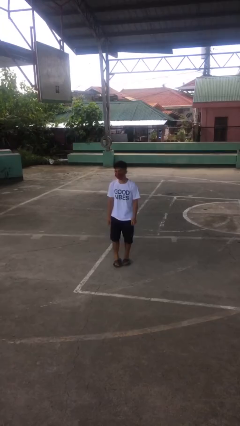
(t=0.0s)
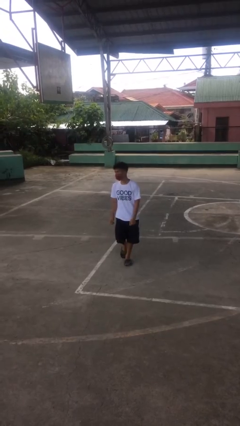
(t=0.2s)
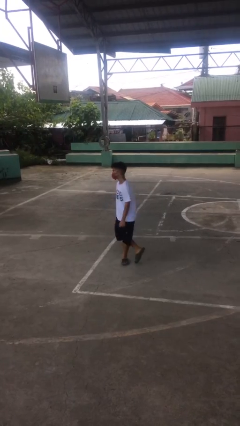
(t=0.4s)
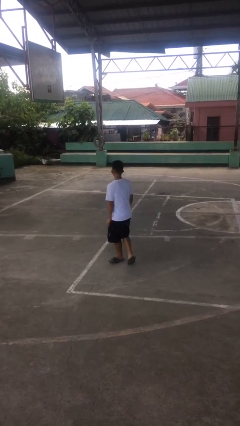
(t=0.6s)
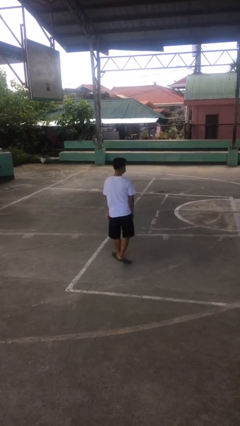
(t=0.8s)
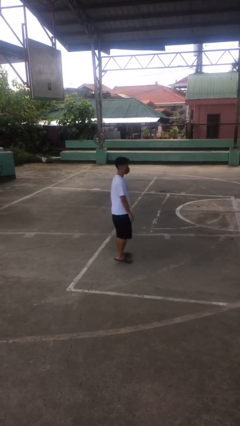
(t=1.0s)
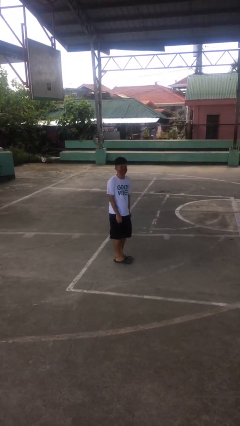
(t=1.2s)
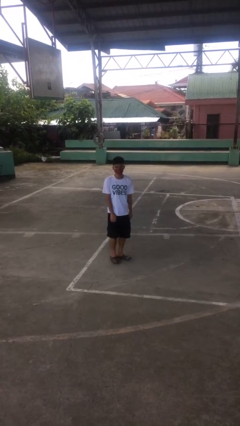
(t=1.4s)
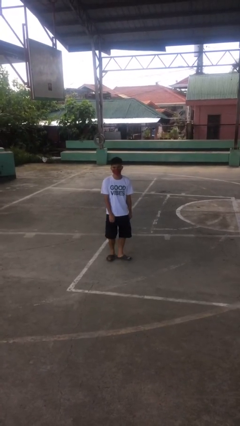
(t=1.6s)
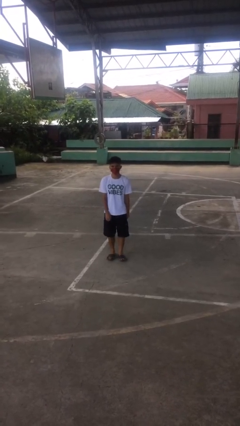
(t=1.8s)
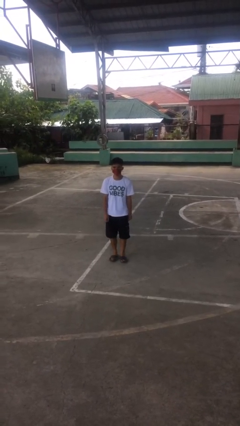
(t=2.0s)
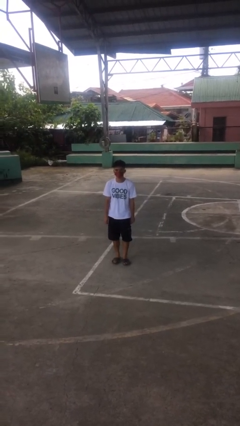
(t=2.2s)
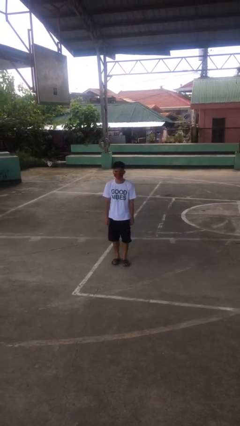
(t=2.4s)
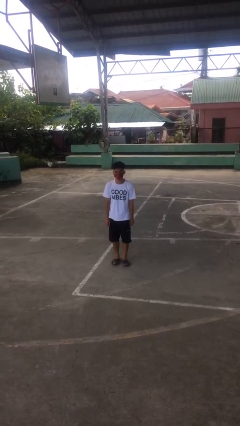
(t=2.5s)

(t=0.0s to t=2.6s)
person twirls

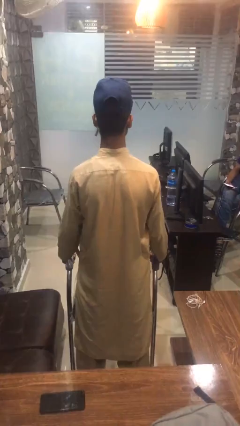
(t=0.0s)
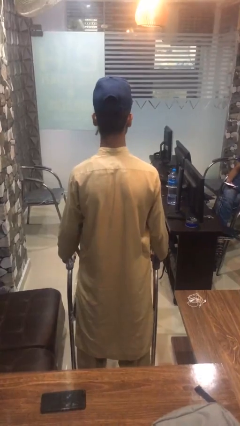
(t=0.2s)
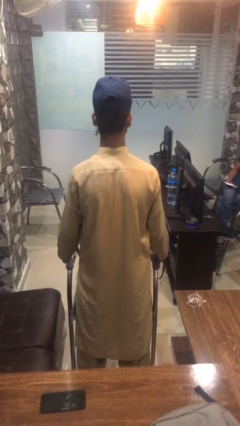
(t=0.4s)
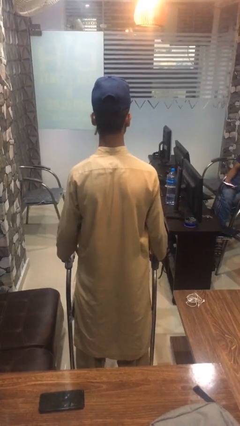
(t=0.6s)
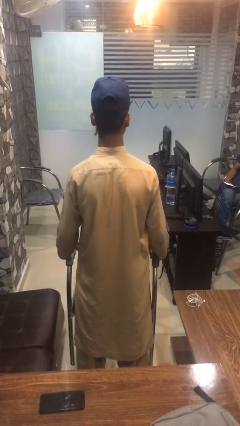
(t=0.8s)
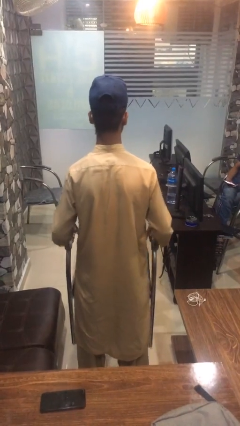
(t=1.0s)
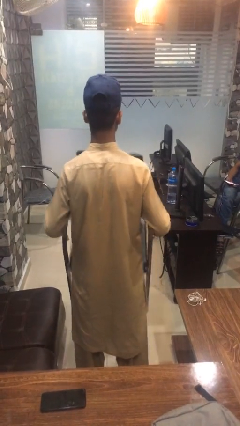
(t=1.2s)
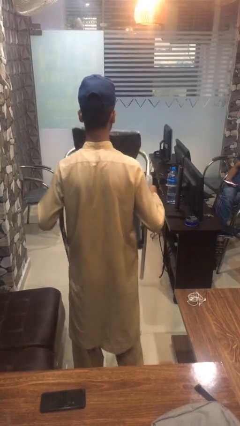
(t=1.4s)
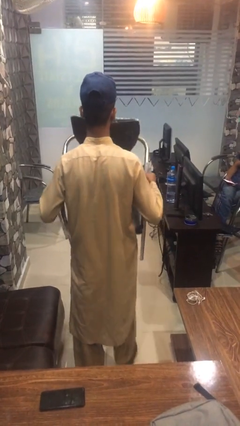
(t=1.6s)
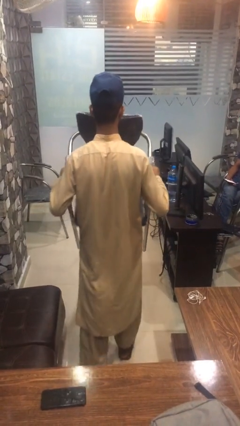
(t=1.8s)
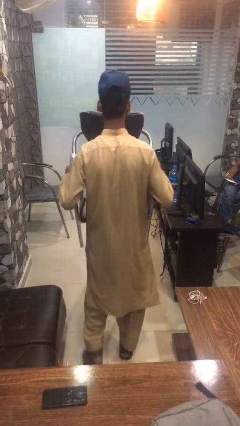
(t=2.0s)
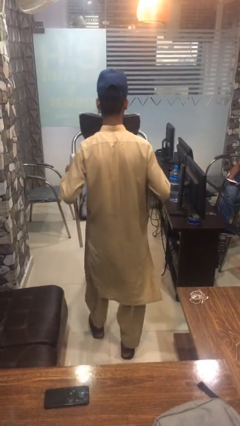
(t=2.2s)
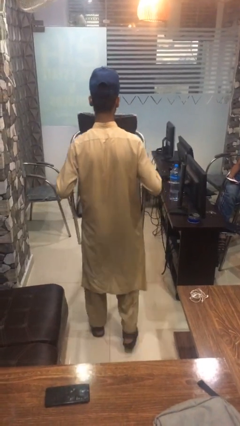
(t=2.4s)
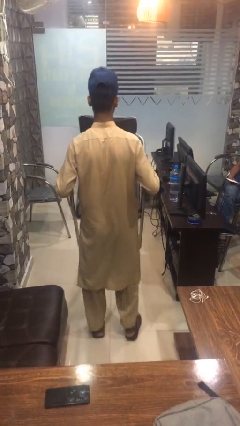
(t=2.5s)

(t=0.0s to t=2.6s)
person carries furniture

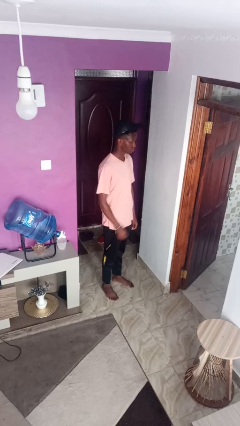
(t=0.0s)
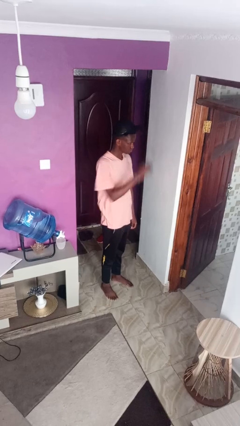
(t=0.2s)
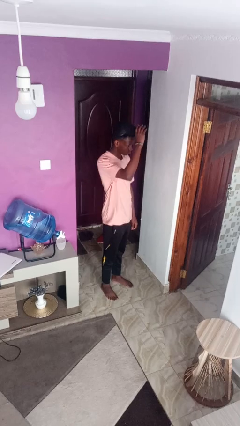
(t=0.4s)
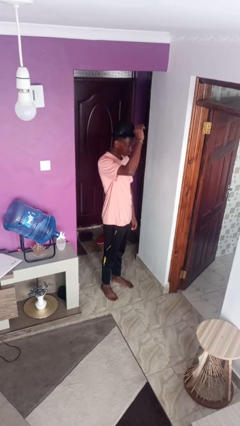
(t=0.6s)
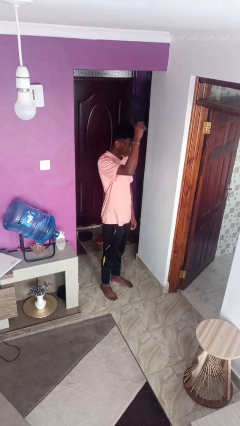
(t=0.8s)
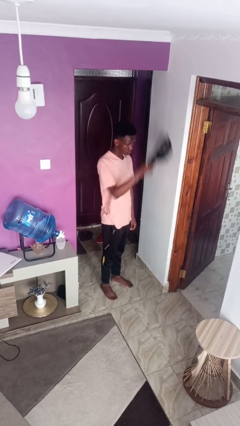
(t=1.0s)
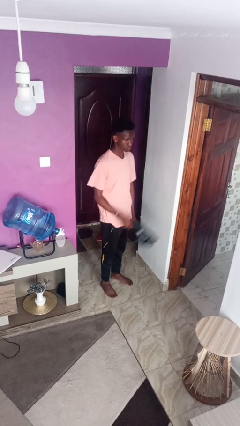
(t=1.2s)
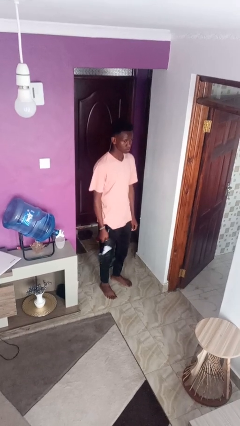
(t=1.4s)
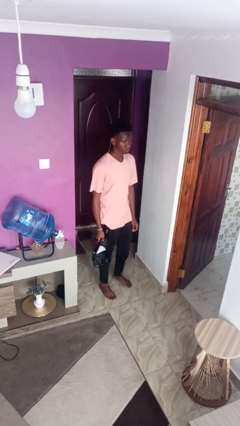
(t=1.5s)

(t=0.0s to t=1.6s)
person takes off hat

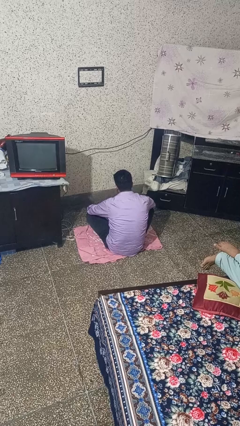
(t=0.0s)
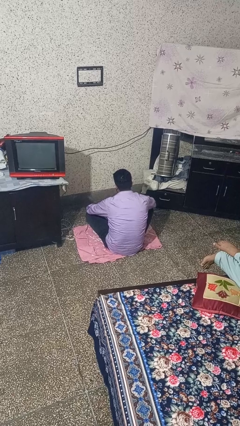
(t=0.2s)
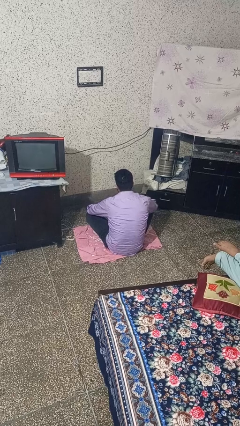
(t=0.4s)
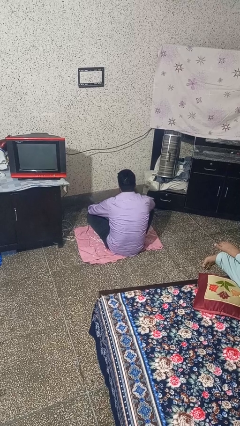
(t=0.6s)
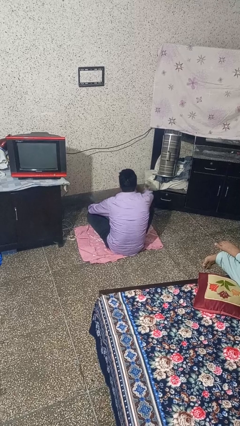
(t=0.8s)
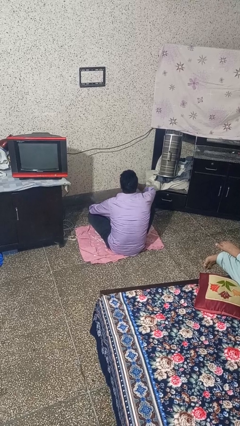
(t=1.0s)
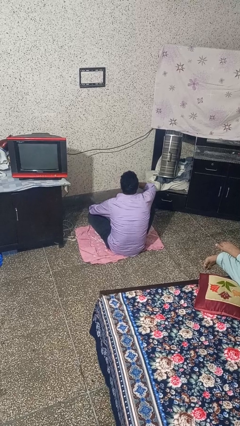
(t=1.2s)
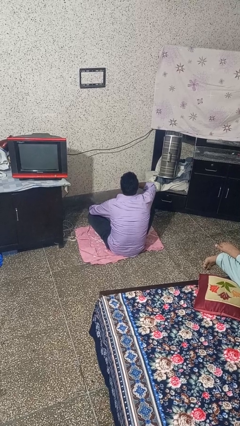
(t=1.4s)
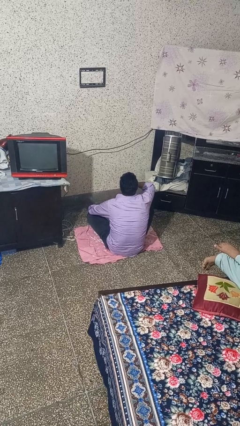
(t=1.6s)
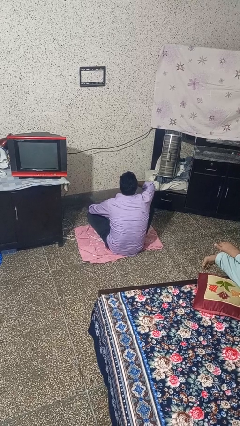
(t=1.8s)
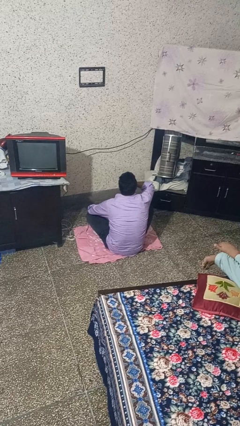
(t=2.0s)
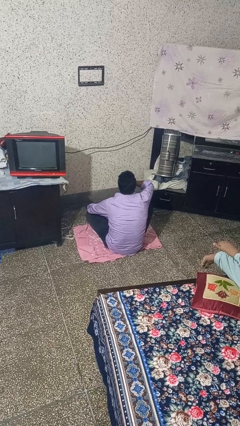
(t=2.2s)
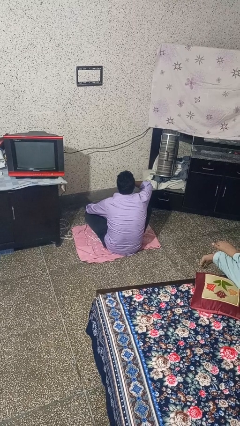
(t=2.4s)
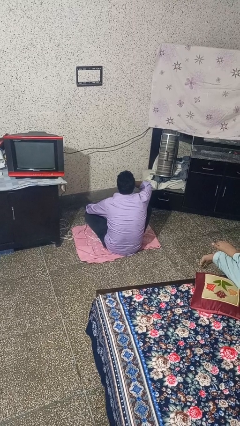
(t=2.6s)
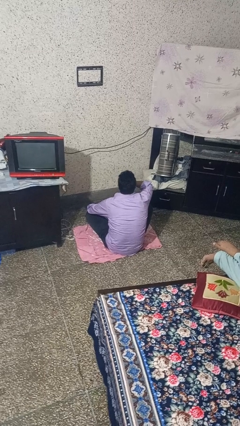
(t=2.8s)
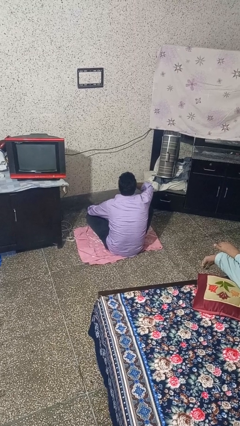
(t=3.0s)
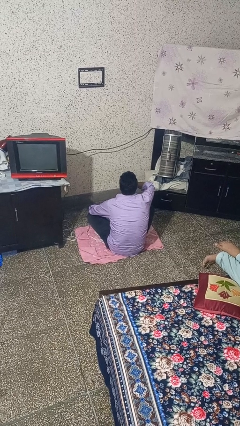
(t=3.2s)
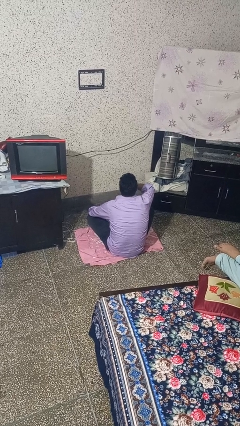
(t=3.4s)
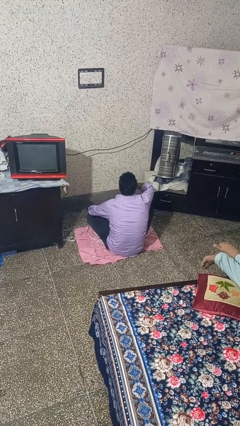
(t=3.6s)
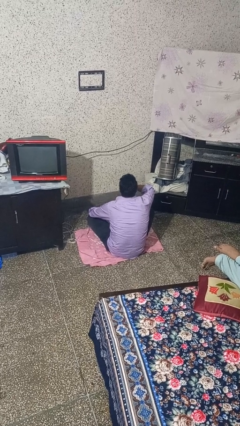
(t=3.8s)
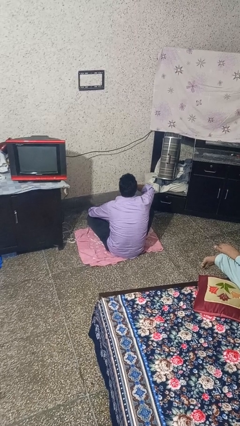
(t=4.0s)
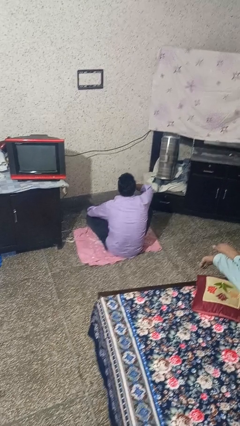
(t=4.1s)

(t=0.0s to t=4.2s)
person yawns

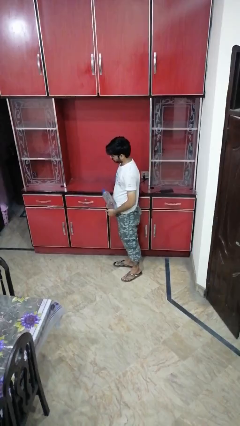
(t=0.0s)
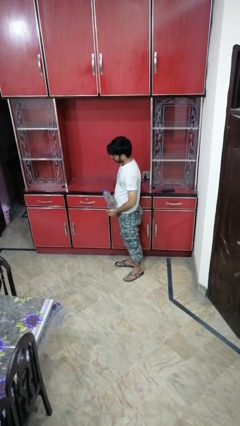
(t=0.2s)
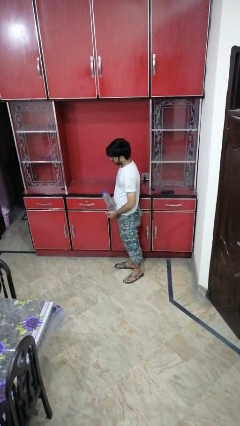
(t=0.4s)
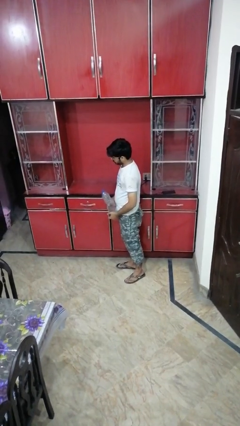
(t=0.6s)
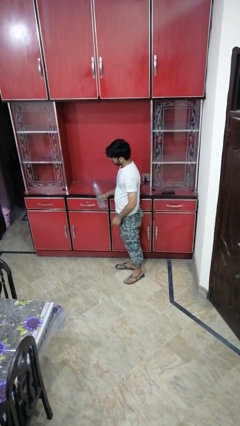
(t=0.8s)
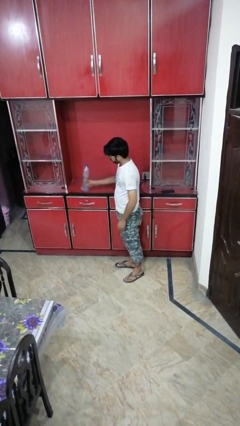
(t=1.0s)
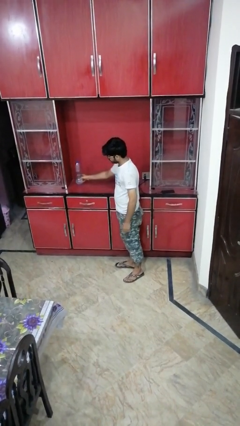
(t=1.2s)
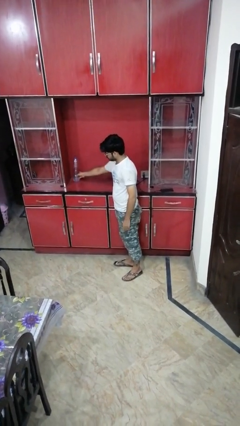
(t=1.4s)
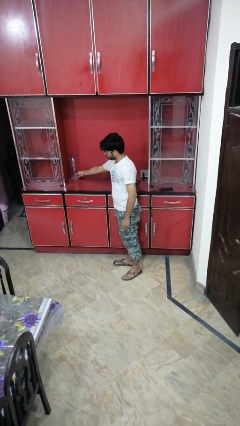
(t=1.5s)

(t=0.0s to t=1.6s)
person puts down object on countertop

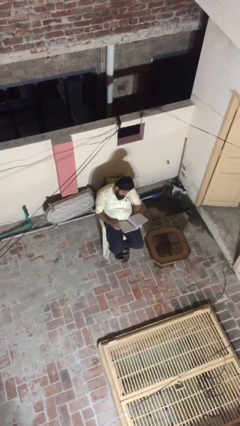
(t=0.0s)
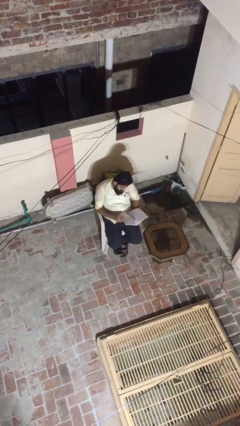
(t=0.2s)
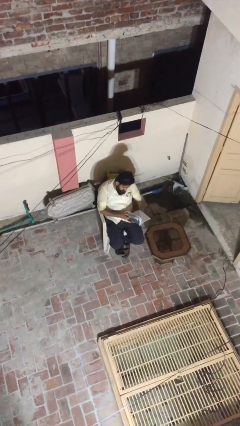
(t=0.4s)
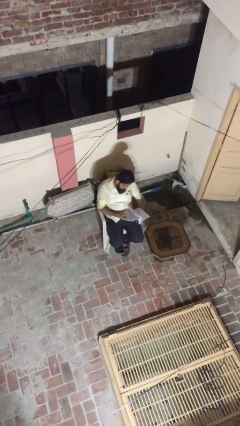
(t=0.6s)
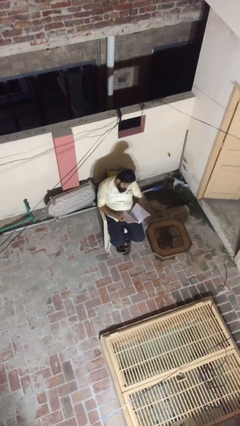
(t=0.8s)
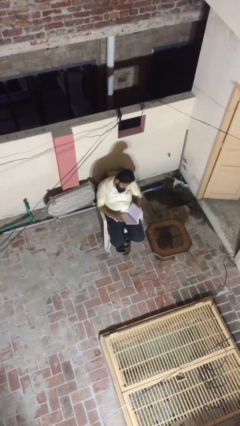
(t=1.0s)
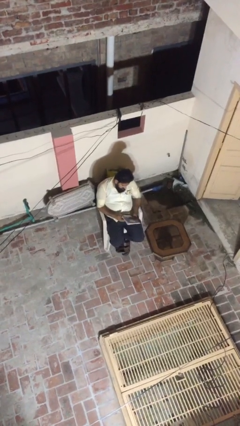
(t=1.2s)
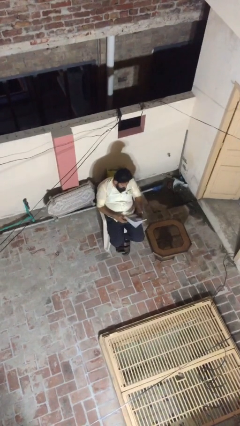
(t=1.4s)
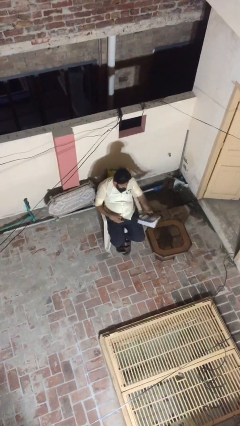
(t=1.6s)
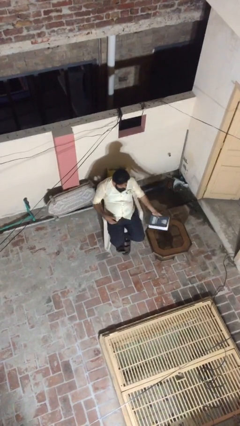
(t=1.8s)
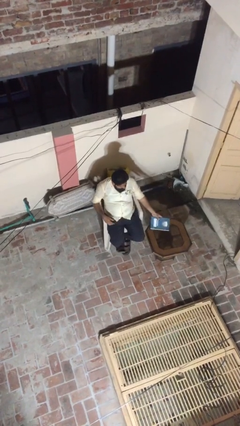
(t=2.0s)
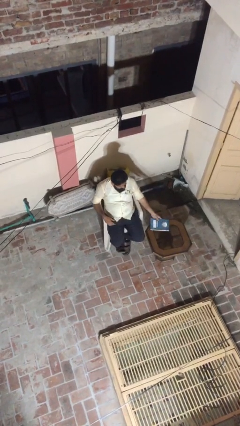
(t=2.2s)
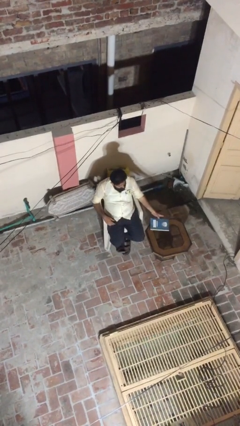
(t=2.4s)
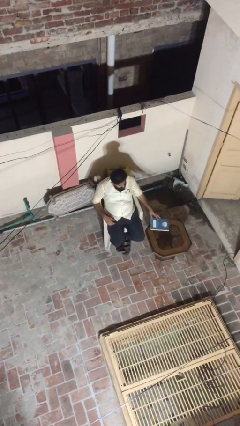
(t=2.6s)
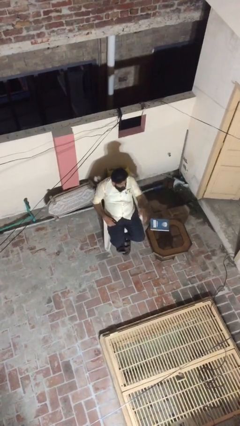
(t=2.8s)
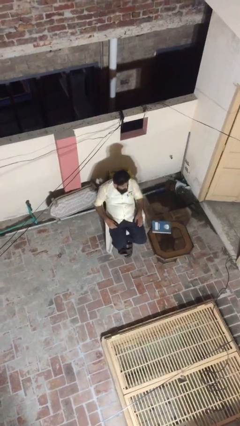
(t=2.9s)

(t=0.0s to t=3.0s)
person puts down object on table

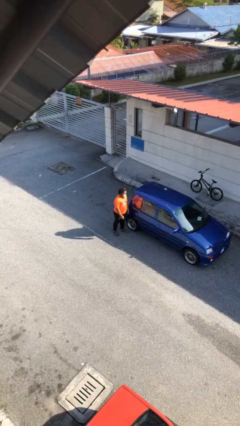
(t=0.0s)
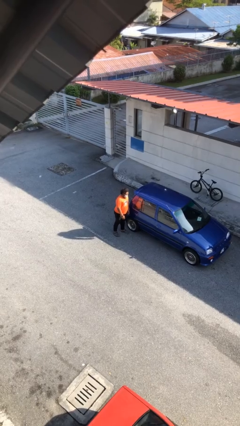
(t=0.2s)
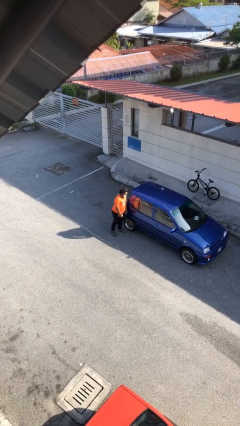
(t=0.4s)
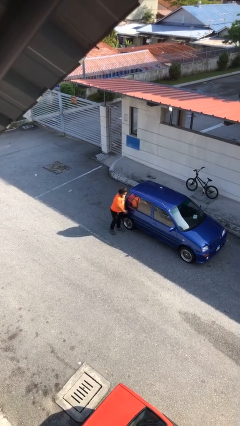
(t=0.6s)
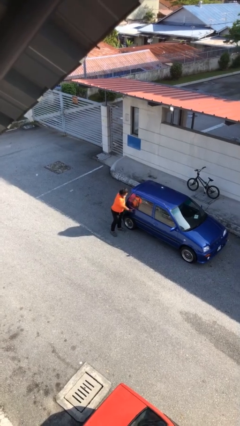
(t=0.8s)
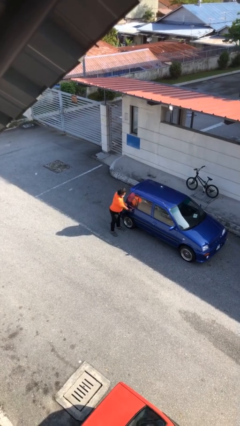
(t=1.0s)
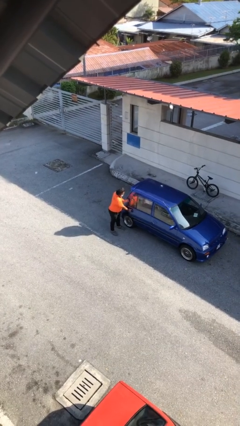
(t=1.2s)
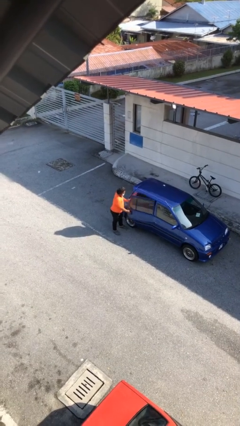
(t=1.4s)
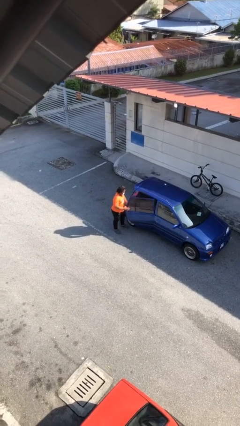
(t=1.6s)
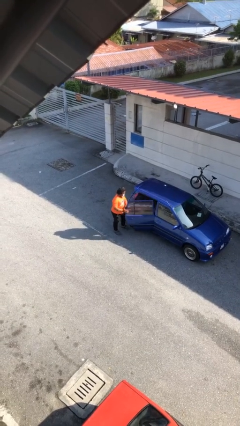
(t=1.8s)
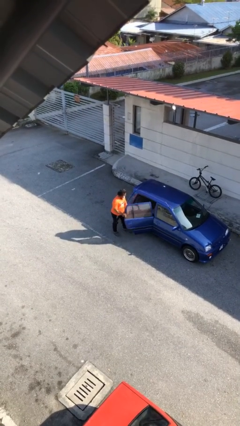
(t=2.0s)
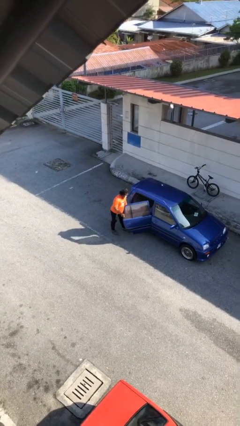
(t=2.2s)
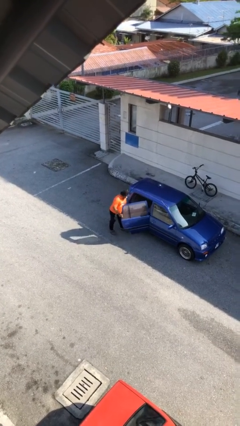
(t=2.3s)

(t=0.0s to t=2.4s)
person opens car door
